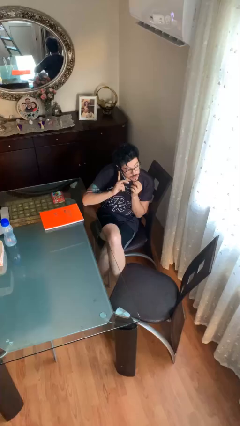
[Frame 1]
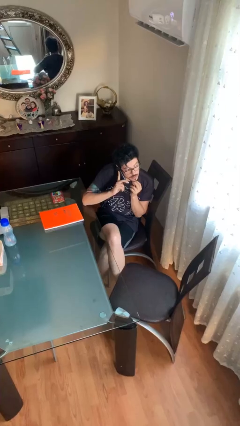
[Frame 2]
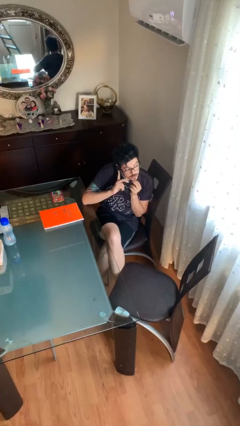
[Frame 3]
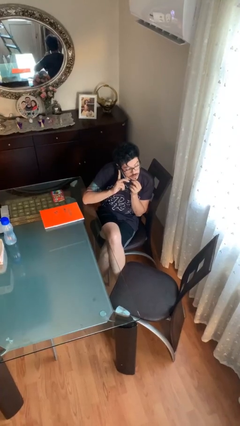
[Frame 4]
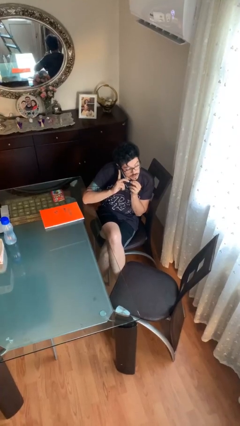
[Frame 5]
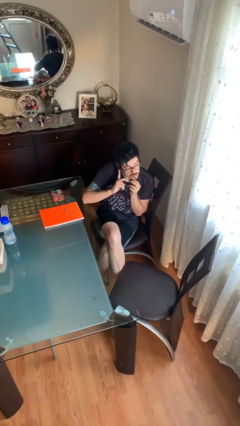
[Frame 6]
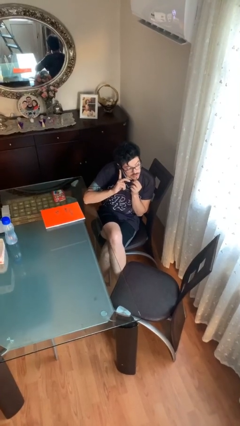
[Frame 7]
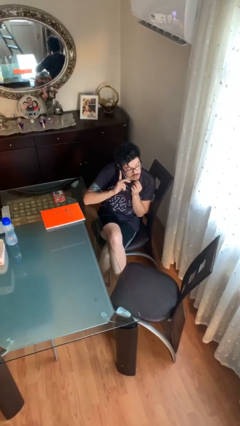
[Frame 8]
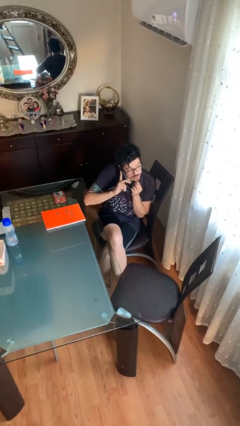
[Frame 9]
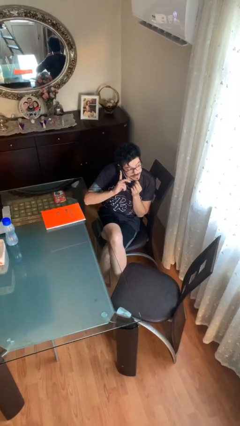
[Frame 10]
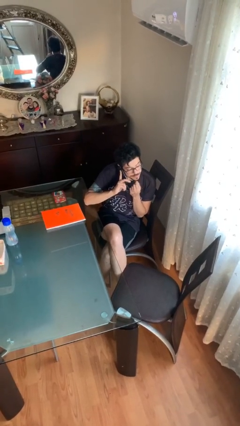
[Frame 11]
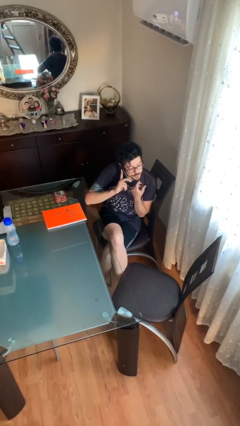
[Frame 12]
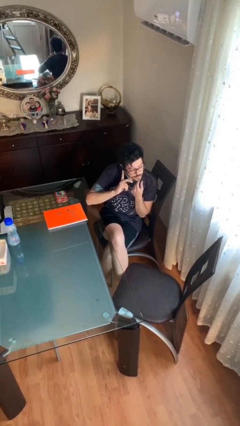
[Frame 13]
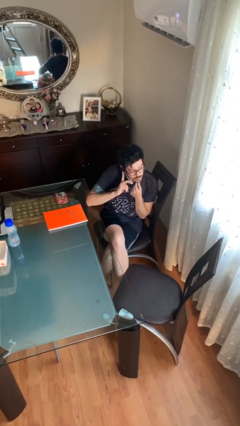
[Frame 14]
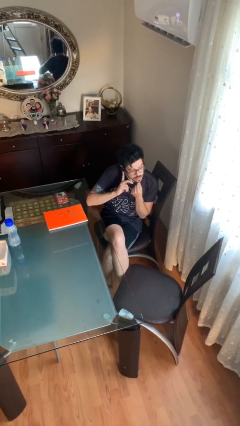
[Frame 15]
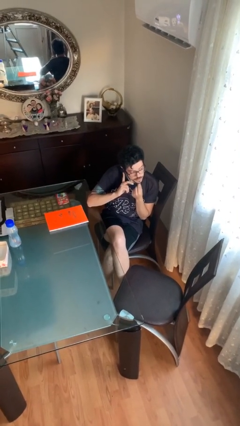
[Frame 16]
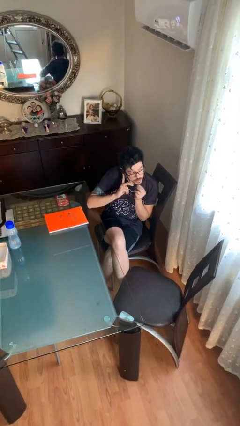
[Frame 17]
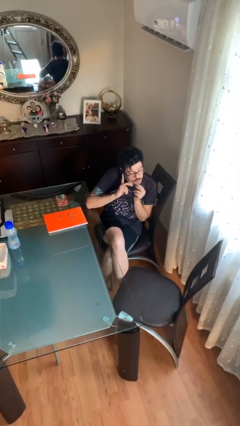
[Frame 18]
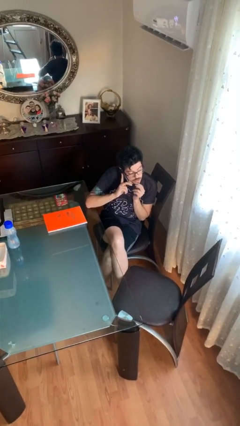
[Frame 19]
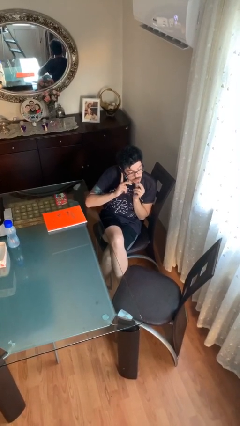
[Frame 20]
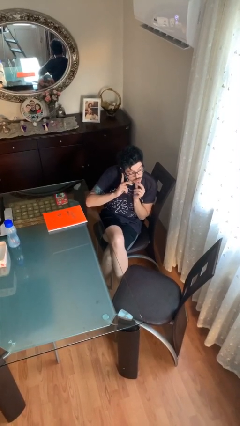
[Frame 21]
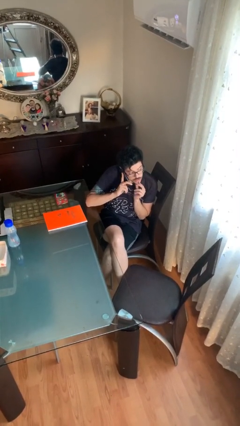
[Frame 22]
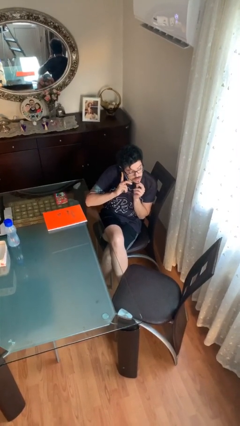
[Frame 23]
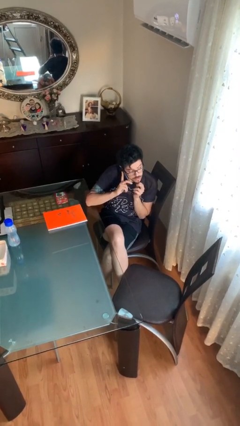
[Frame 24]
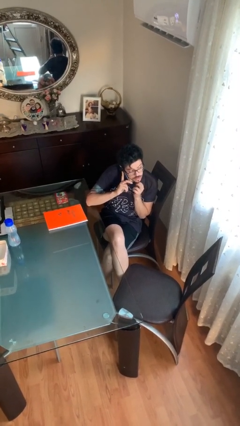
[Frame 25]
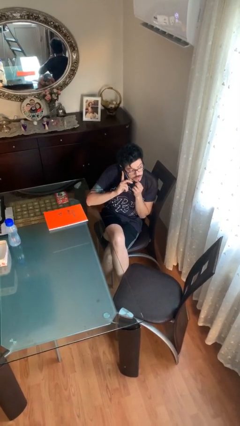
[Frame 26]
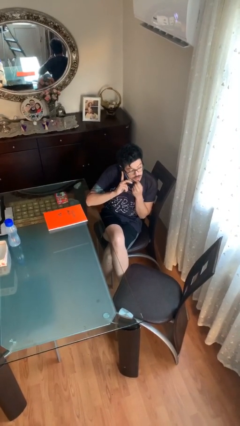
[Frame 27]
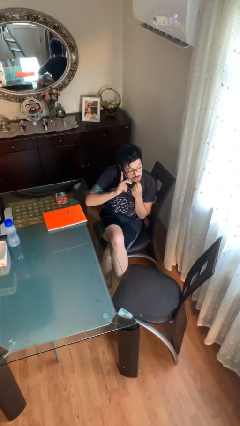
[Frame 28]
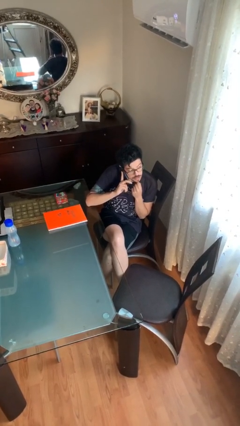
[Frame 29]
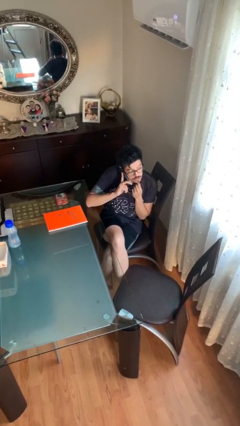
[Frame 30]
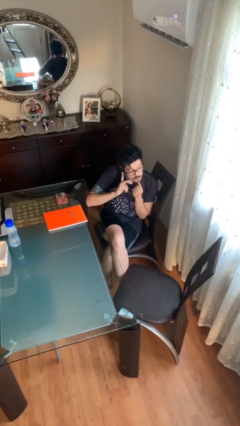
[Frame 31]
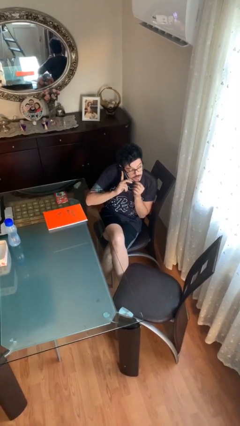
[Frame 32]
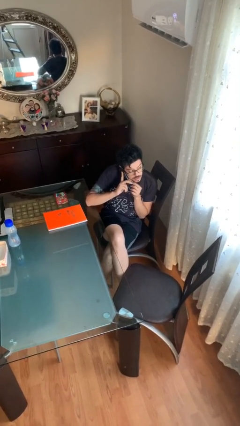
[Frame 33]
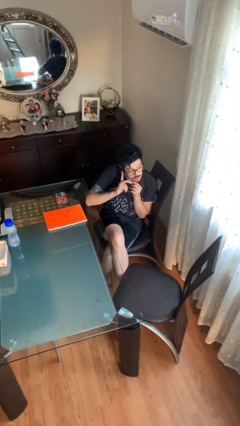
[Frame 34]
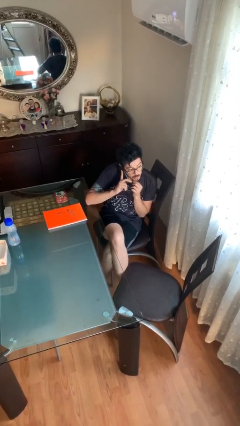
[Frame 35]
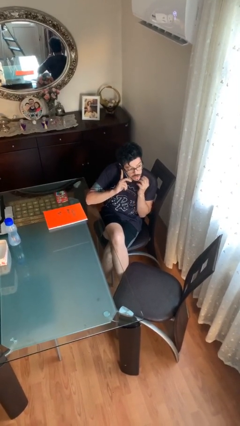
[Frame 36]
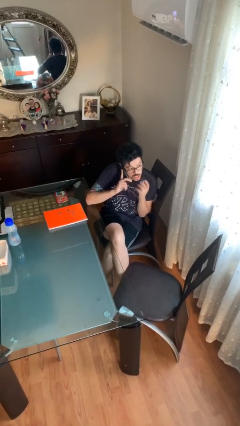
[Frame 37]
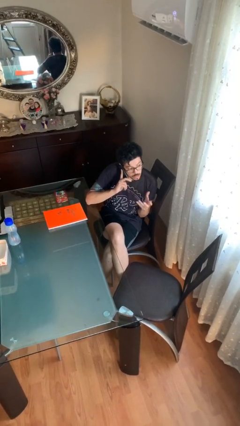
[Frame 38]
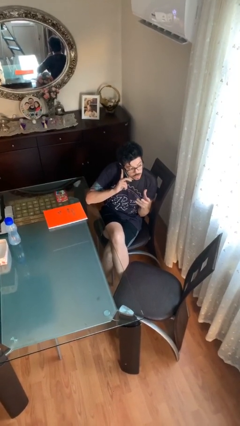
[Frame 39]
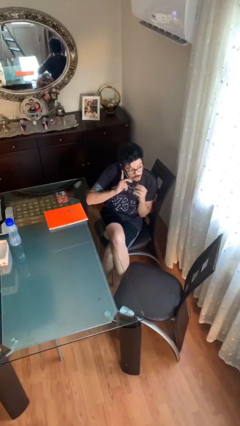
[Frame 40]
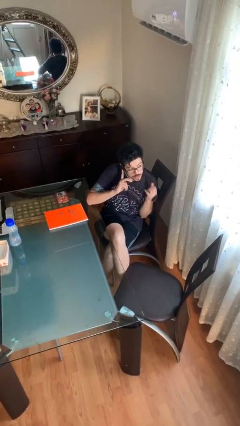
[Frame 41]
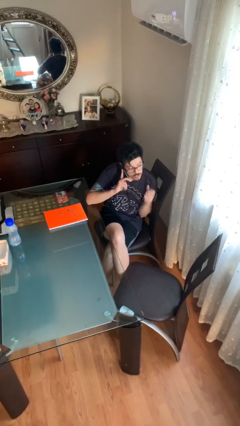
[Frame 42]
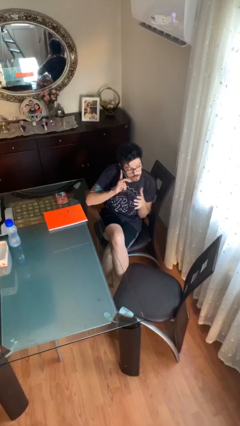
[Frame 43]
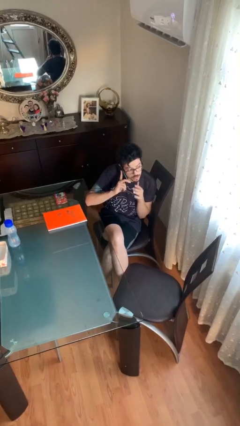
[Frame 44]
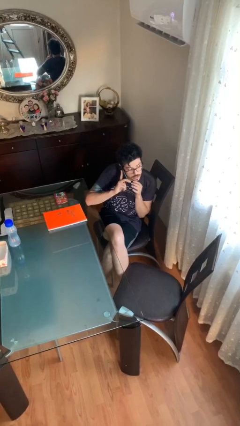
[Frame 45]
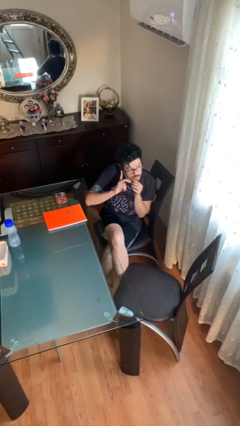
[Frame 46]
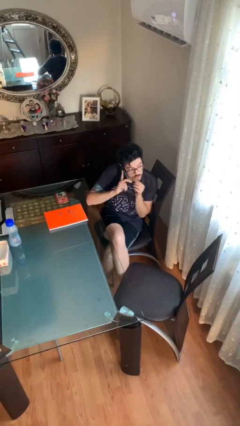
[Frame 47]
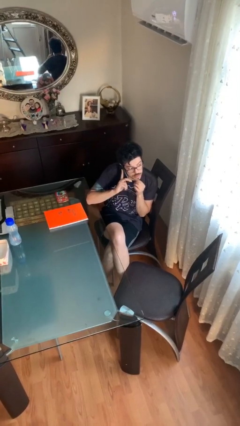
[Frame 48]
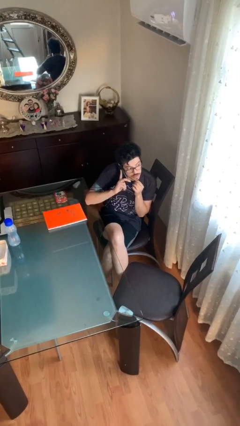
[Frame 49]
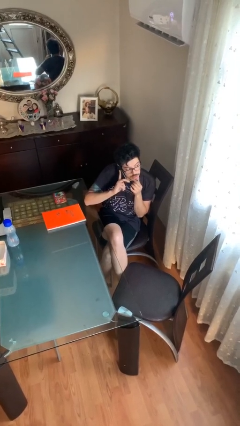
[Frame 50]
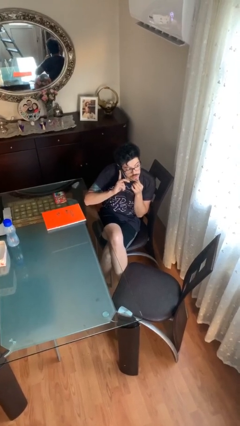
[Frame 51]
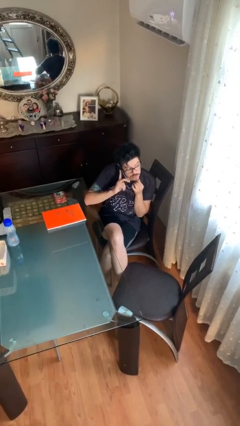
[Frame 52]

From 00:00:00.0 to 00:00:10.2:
person talks on phone

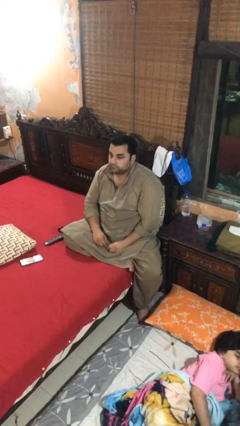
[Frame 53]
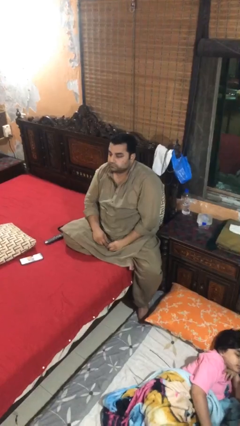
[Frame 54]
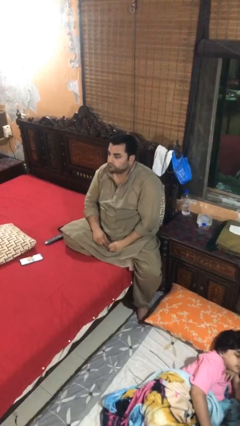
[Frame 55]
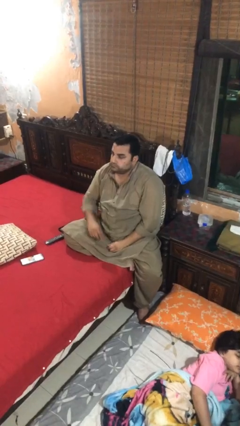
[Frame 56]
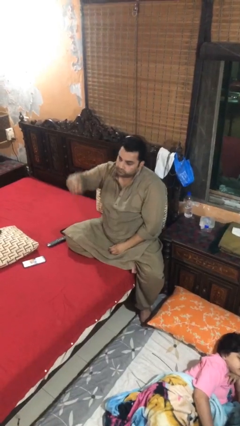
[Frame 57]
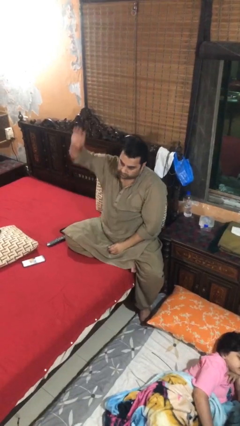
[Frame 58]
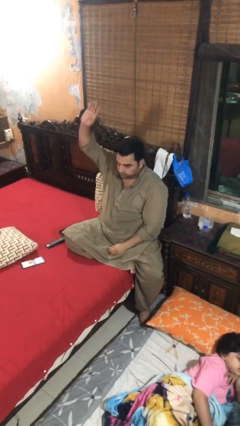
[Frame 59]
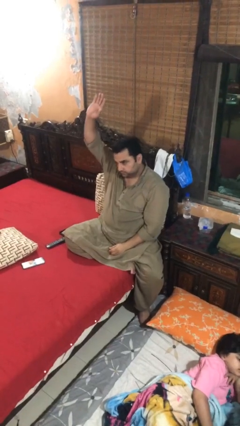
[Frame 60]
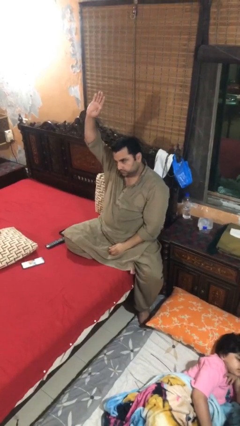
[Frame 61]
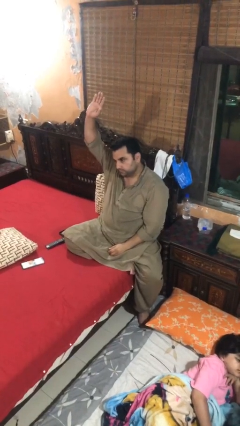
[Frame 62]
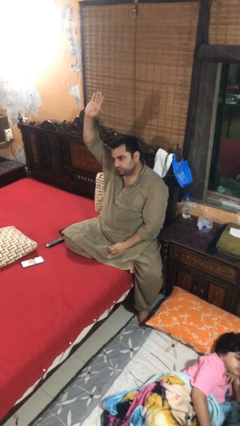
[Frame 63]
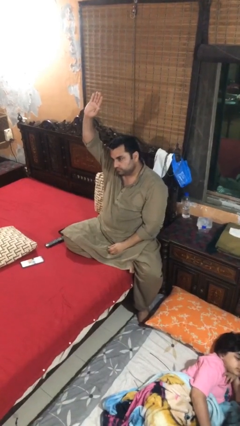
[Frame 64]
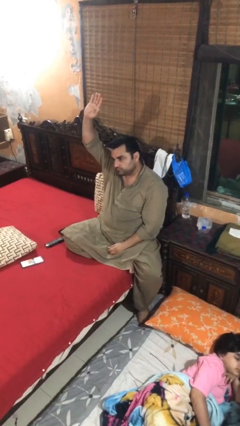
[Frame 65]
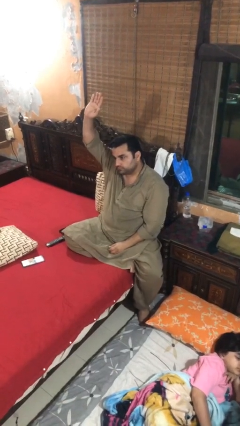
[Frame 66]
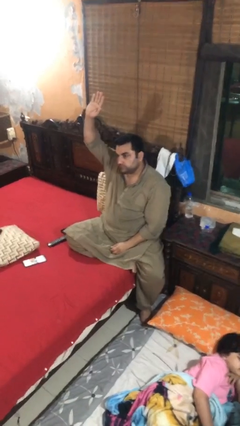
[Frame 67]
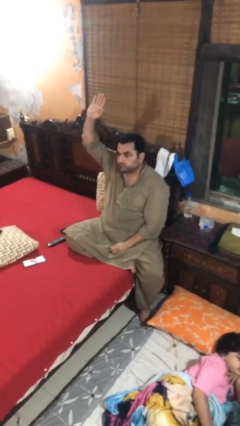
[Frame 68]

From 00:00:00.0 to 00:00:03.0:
person gestures raise hand

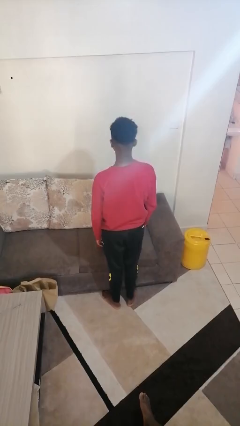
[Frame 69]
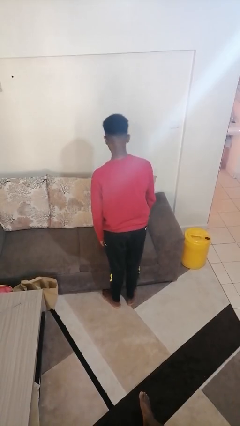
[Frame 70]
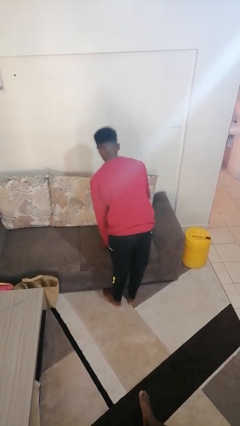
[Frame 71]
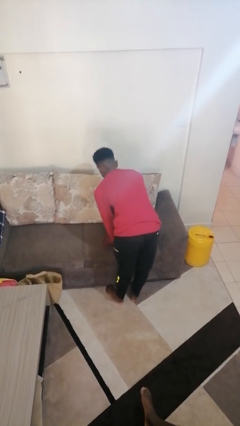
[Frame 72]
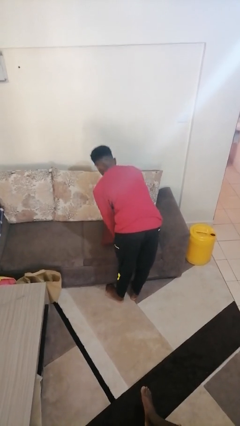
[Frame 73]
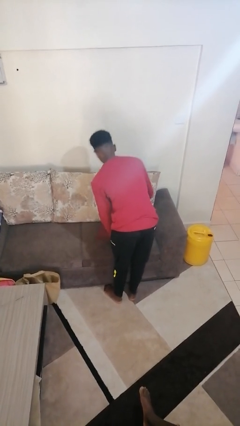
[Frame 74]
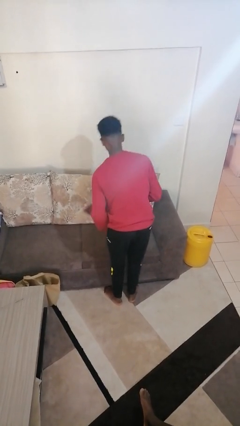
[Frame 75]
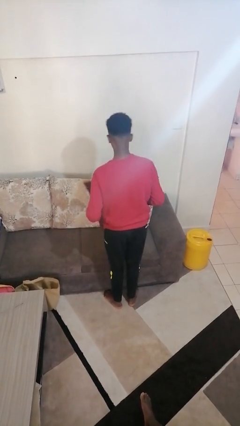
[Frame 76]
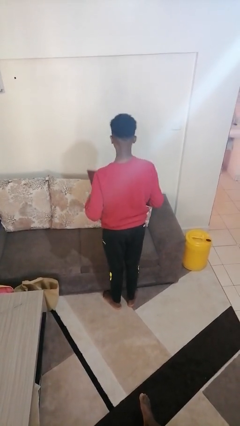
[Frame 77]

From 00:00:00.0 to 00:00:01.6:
person picks up object from couch

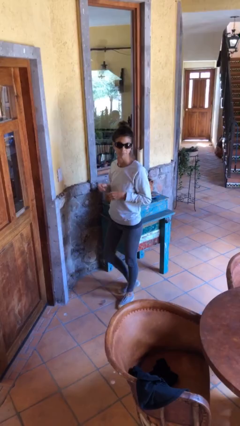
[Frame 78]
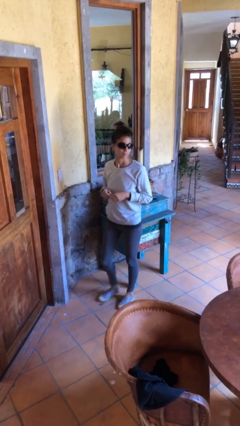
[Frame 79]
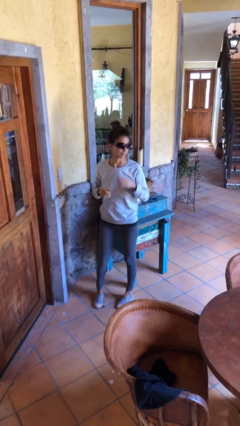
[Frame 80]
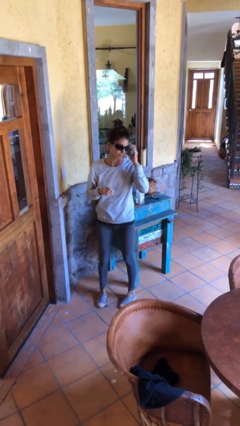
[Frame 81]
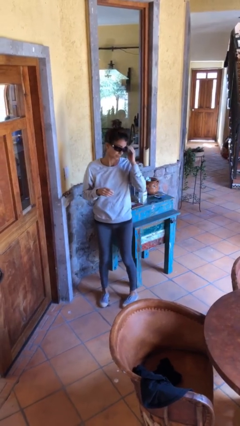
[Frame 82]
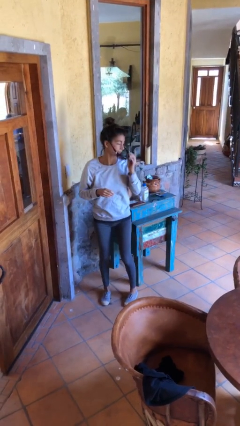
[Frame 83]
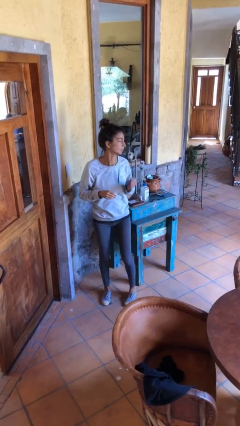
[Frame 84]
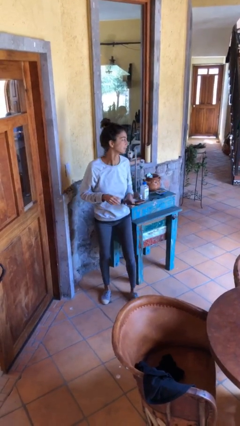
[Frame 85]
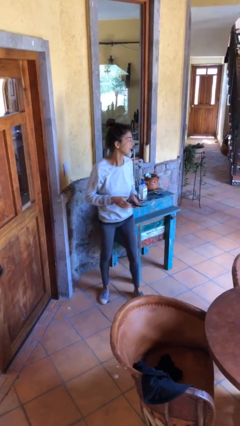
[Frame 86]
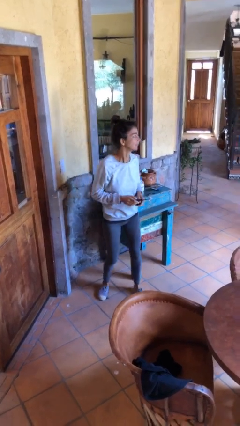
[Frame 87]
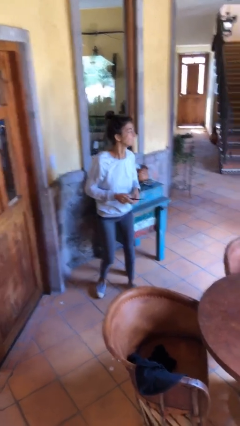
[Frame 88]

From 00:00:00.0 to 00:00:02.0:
person takes off sunglasses

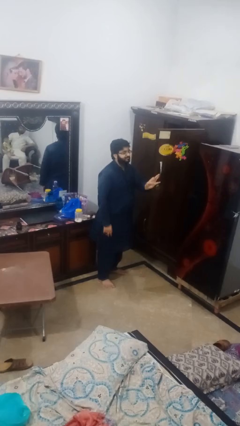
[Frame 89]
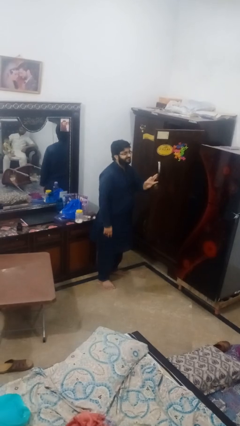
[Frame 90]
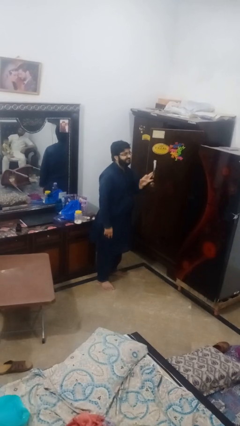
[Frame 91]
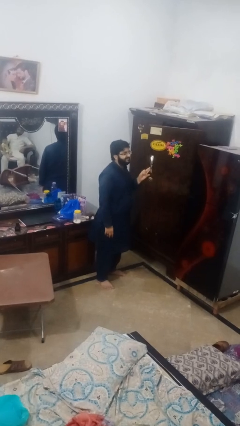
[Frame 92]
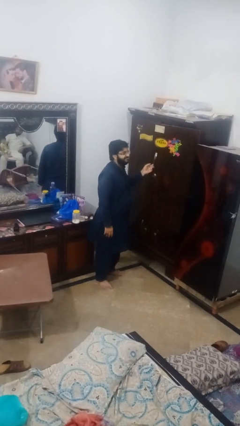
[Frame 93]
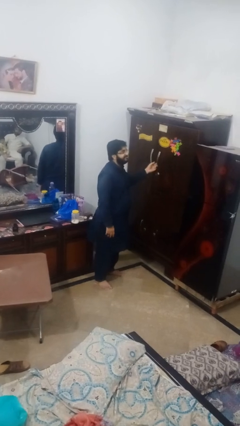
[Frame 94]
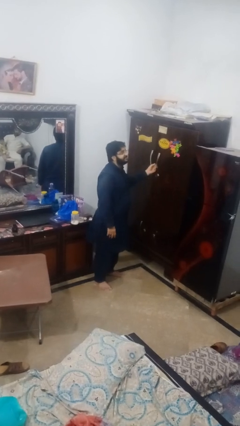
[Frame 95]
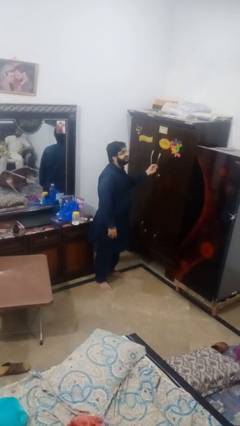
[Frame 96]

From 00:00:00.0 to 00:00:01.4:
person closes closet door
